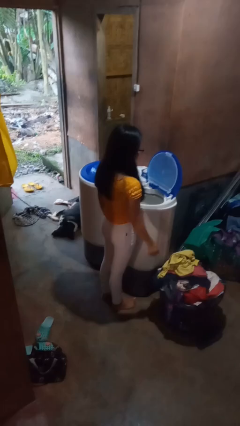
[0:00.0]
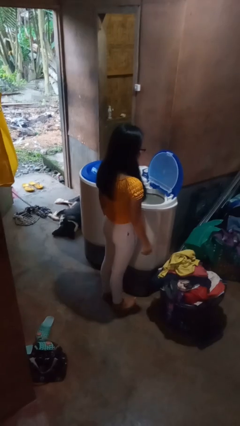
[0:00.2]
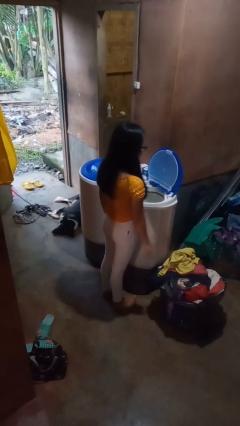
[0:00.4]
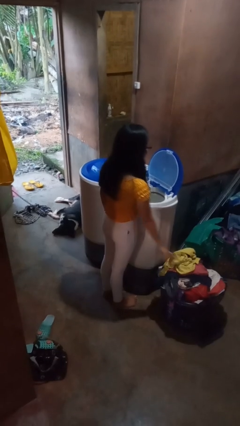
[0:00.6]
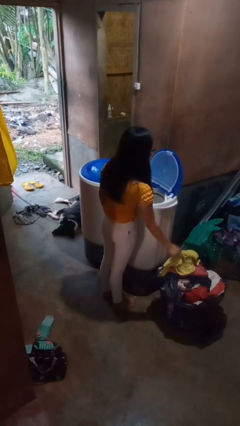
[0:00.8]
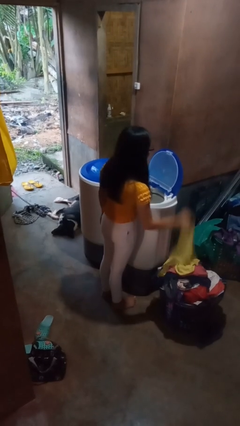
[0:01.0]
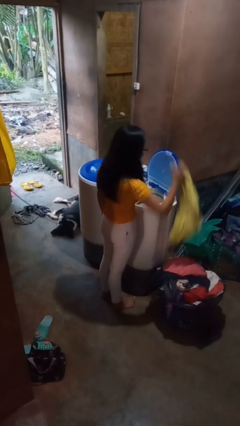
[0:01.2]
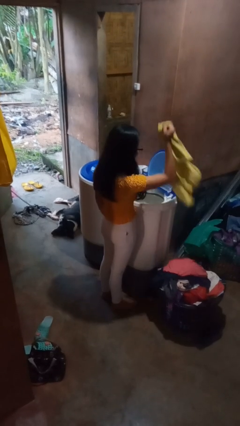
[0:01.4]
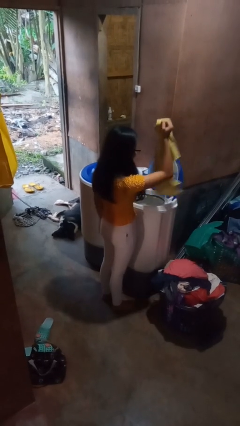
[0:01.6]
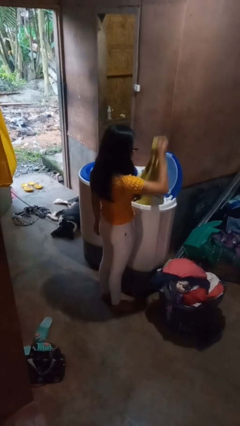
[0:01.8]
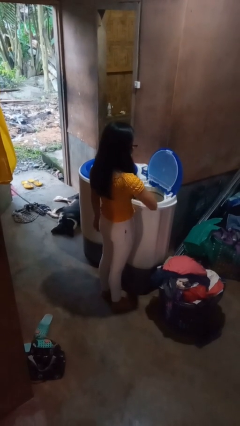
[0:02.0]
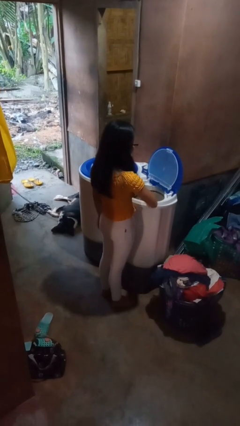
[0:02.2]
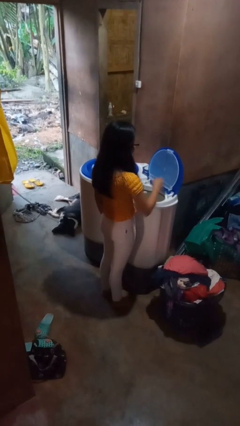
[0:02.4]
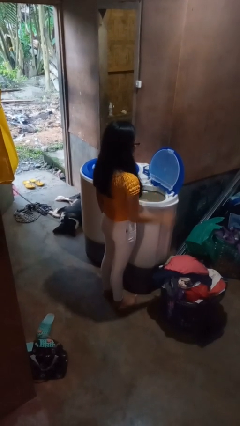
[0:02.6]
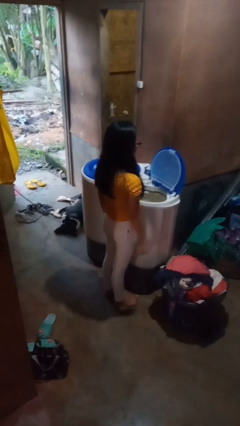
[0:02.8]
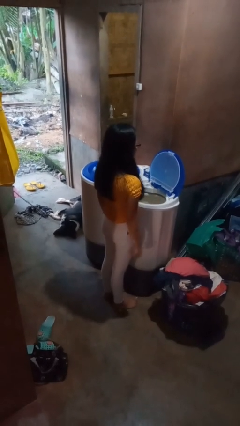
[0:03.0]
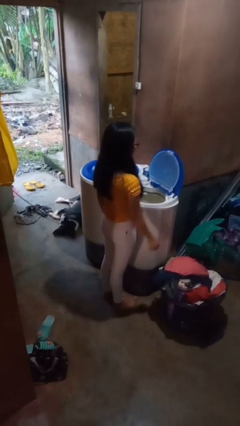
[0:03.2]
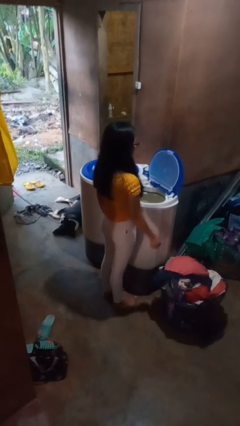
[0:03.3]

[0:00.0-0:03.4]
person loads dryer

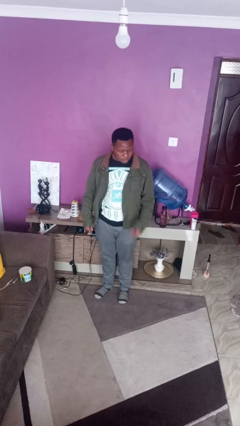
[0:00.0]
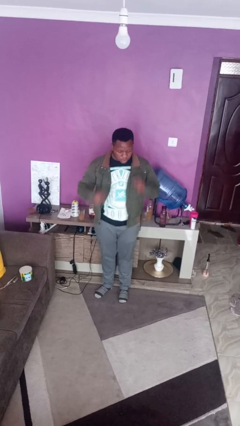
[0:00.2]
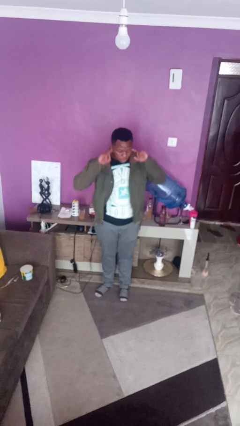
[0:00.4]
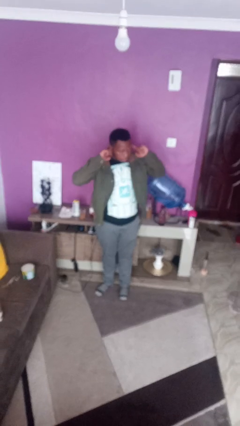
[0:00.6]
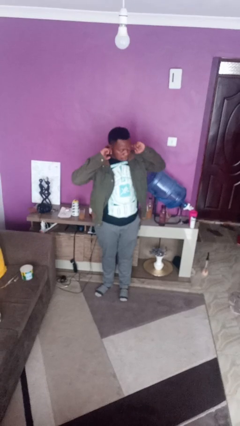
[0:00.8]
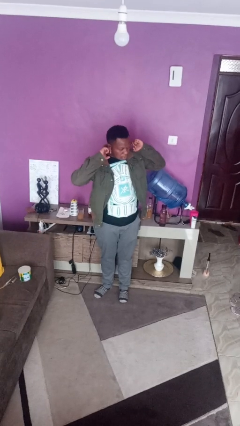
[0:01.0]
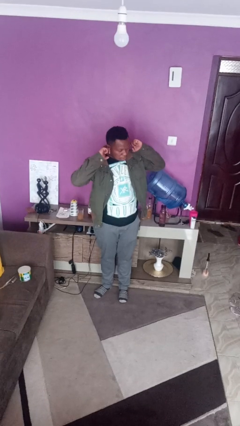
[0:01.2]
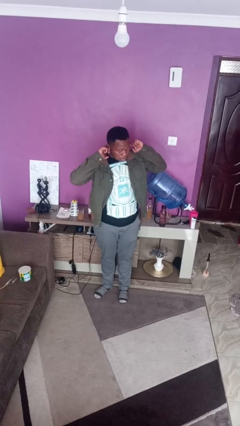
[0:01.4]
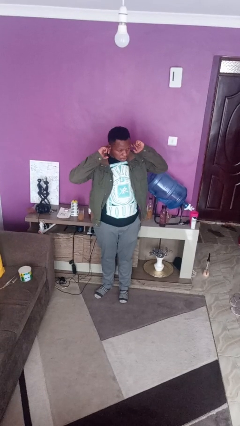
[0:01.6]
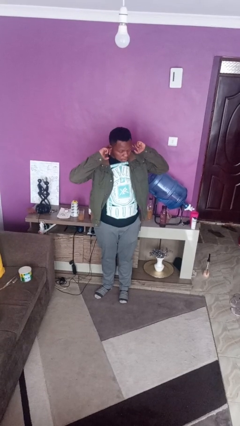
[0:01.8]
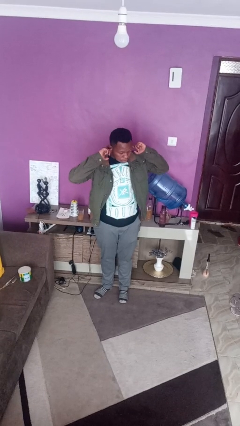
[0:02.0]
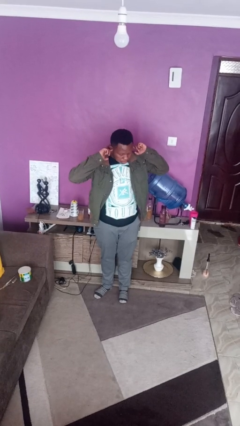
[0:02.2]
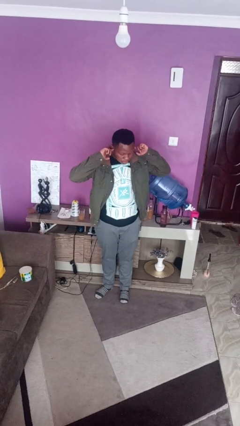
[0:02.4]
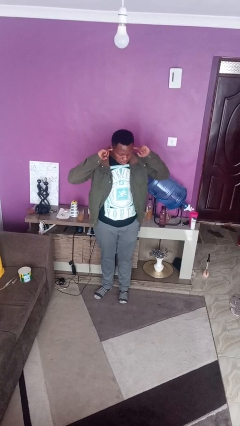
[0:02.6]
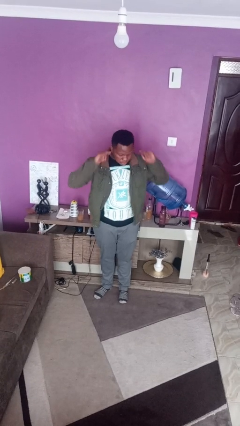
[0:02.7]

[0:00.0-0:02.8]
person puts fingers in ear

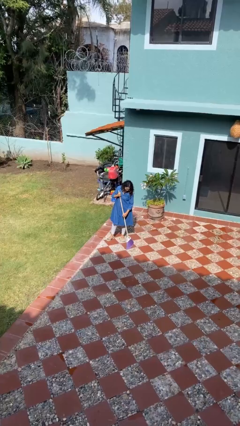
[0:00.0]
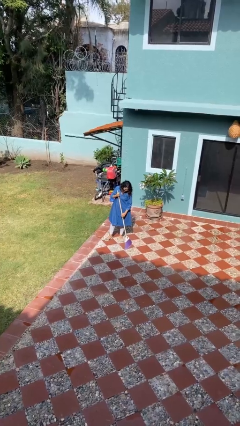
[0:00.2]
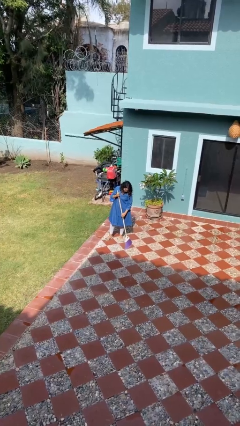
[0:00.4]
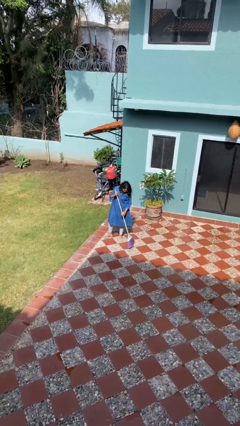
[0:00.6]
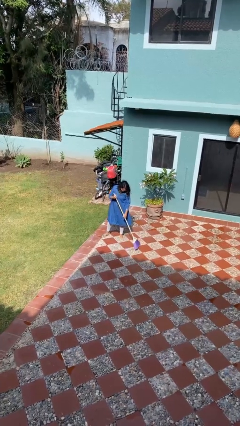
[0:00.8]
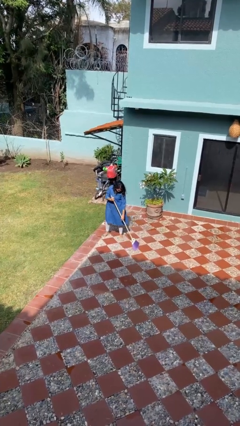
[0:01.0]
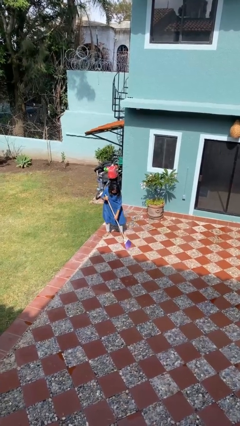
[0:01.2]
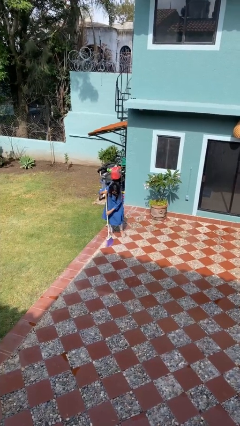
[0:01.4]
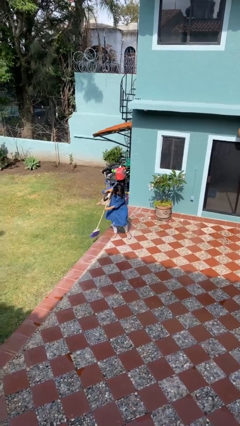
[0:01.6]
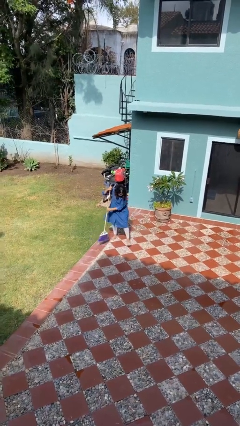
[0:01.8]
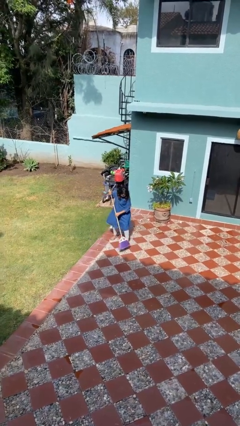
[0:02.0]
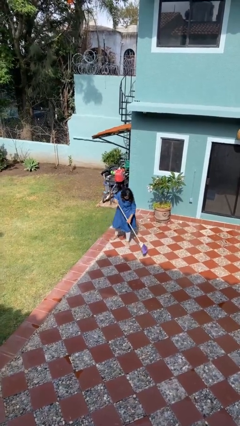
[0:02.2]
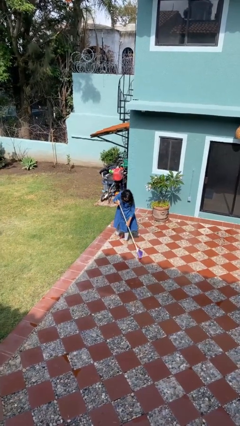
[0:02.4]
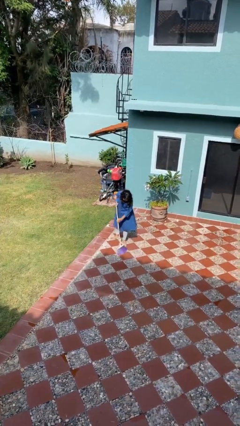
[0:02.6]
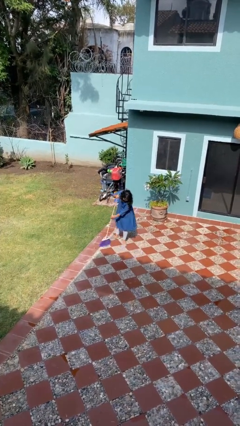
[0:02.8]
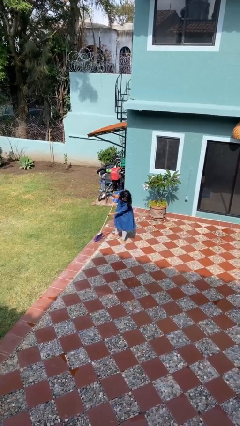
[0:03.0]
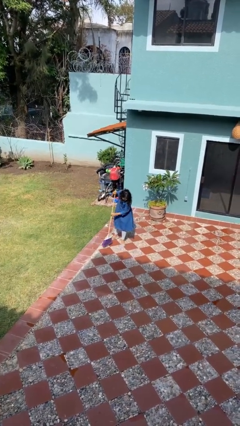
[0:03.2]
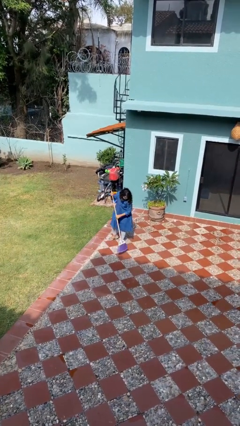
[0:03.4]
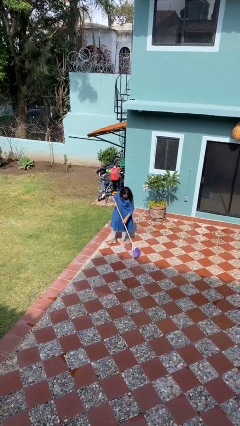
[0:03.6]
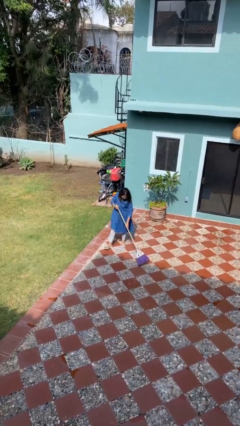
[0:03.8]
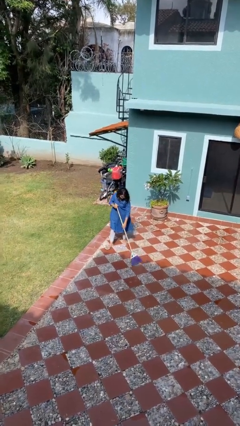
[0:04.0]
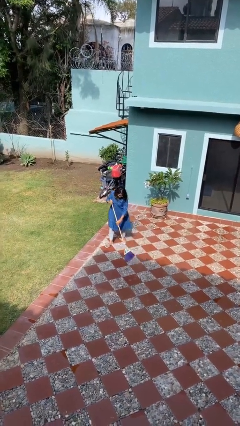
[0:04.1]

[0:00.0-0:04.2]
person sweeps floor

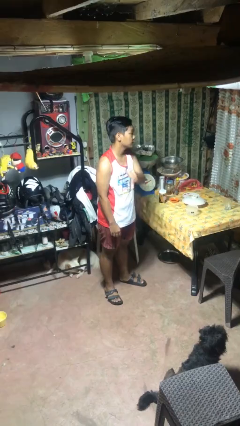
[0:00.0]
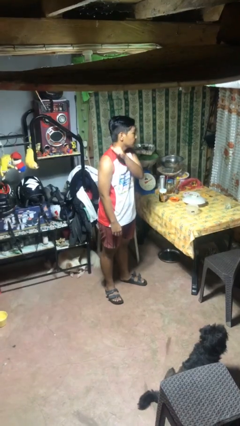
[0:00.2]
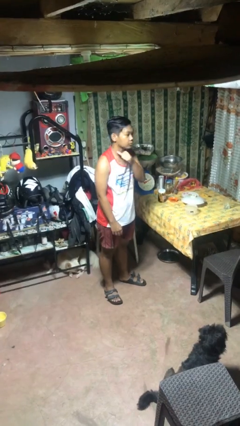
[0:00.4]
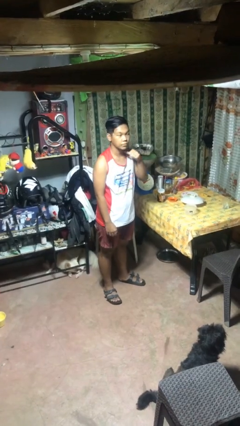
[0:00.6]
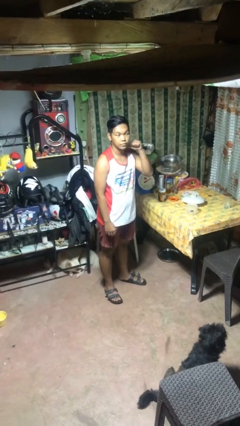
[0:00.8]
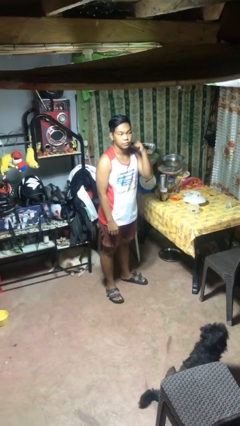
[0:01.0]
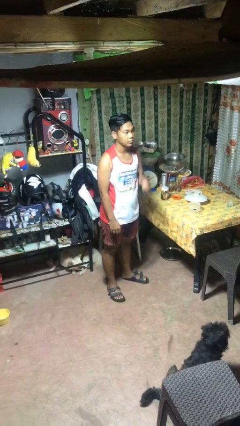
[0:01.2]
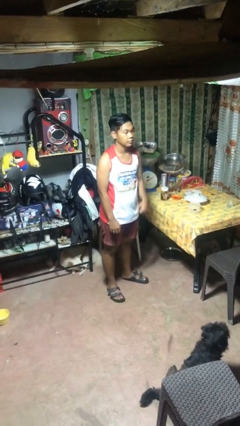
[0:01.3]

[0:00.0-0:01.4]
person gestures cut

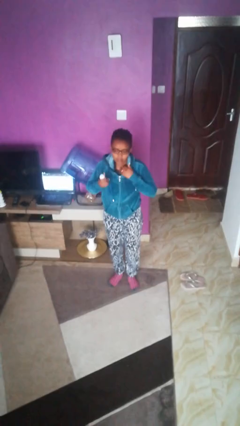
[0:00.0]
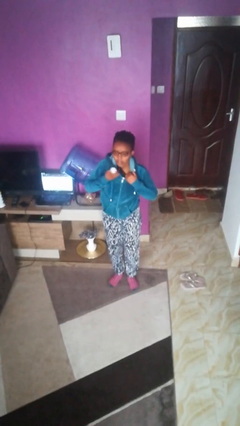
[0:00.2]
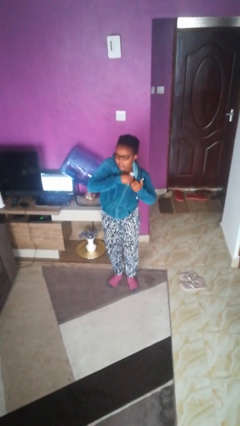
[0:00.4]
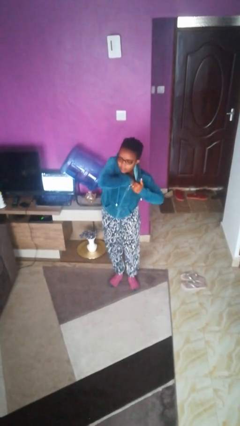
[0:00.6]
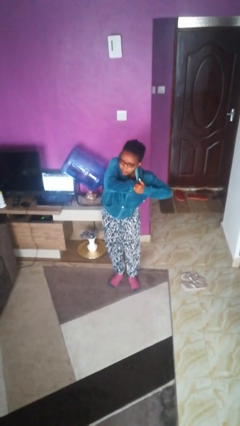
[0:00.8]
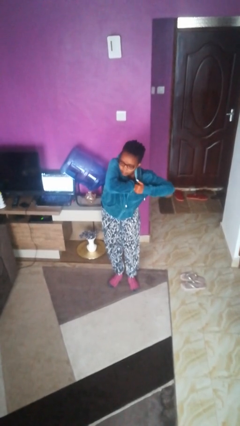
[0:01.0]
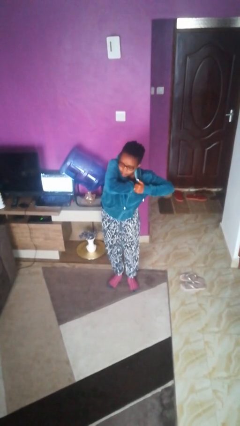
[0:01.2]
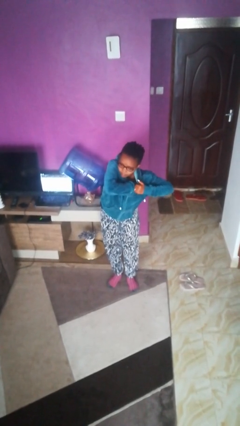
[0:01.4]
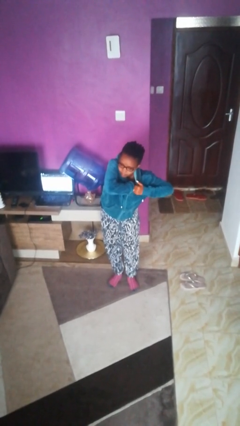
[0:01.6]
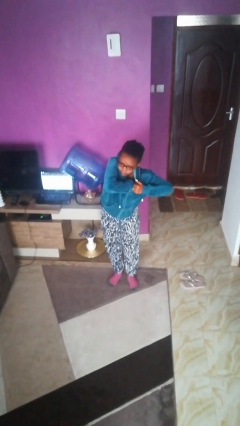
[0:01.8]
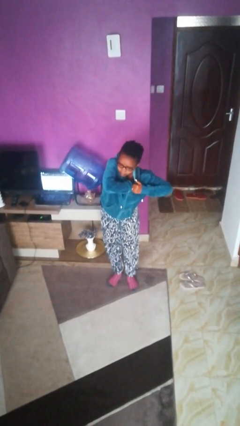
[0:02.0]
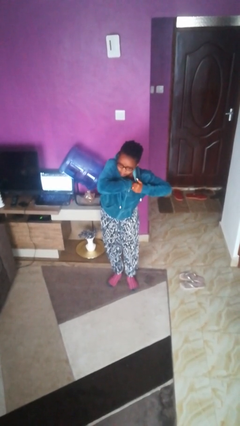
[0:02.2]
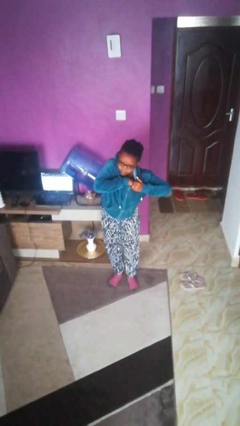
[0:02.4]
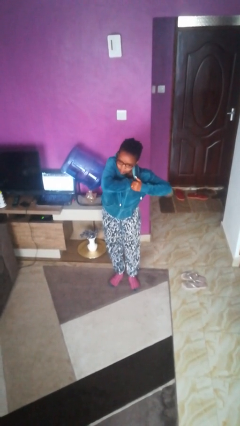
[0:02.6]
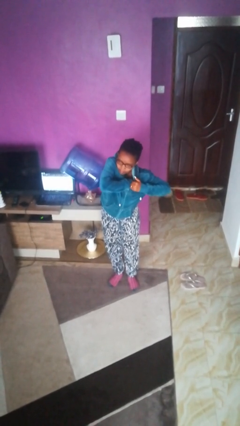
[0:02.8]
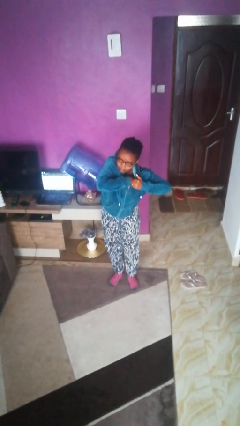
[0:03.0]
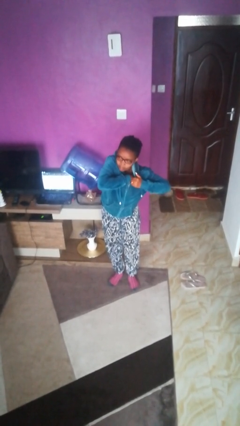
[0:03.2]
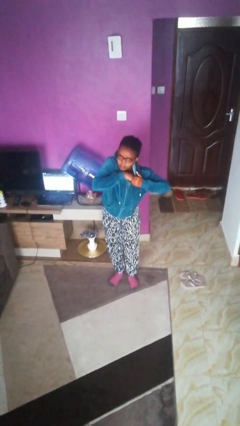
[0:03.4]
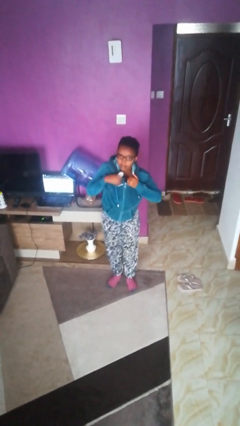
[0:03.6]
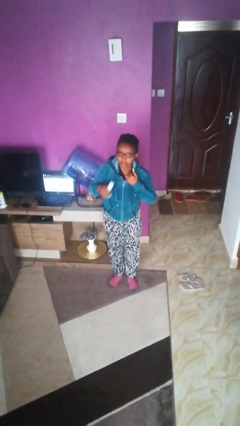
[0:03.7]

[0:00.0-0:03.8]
person applies deodorant

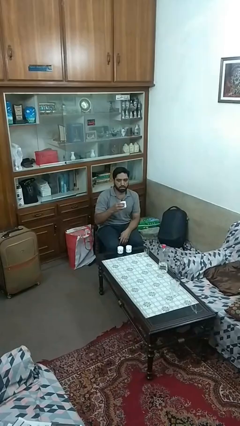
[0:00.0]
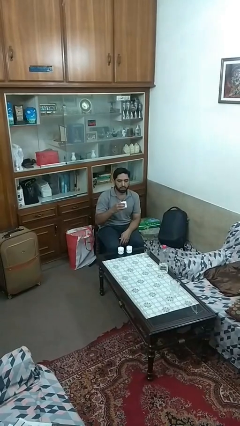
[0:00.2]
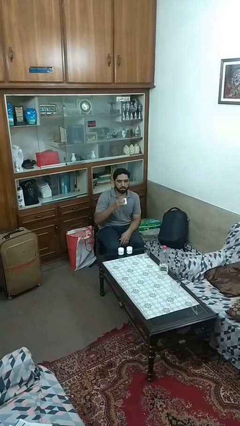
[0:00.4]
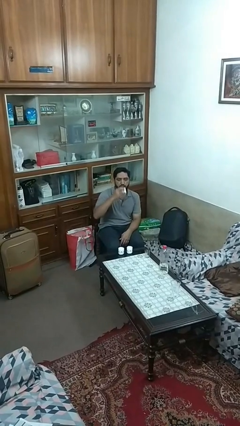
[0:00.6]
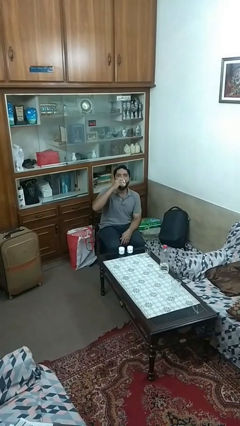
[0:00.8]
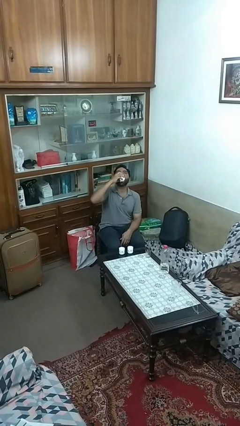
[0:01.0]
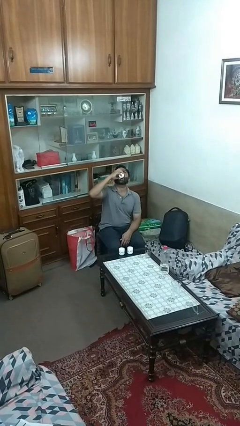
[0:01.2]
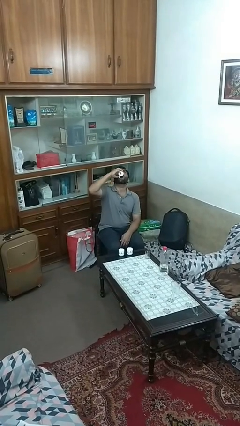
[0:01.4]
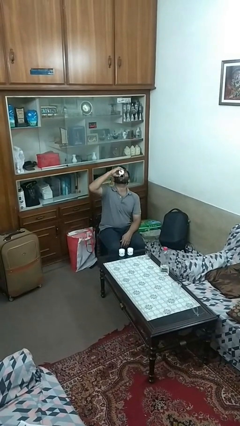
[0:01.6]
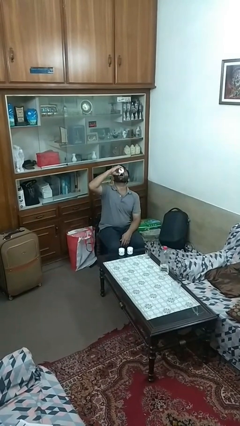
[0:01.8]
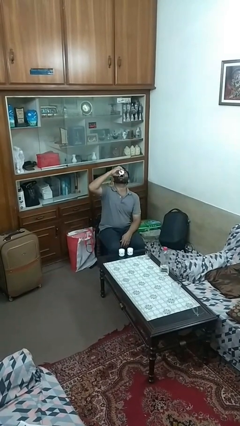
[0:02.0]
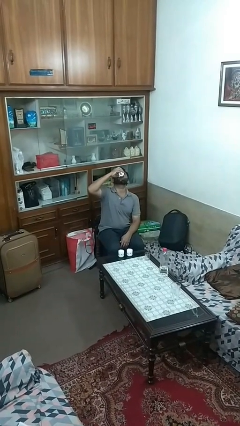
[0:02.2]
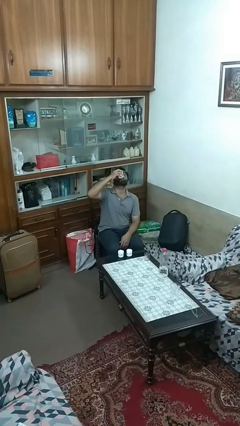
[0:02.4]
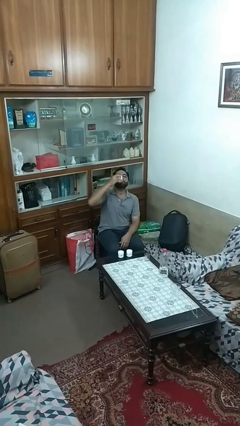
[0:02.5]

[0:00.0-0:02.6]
person drinks from shotglass
